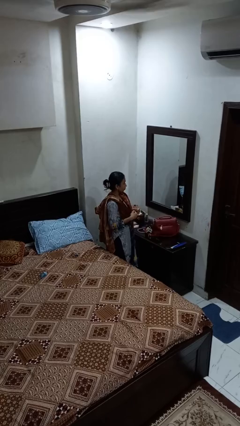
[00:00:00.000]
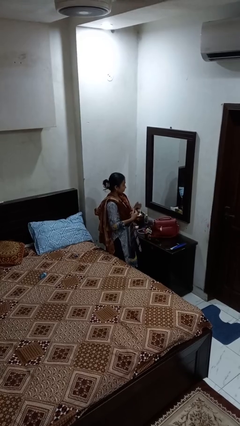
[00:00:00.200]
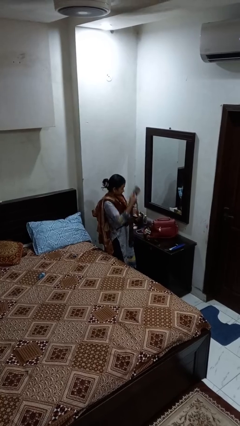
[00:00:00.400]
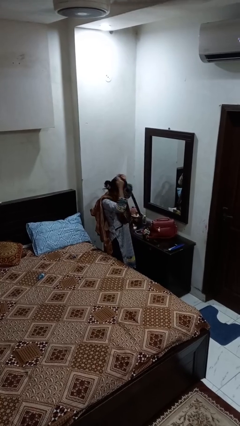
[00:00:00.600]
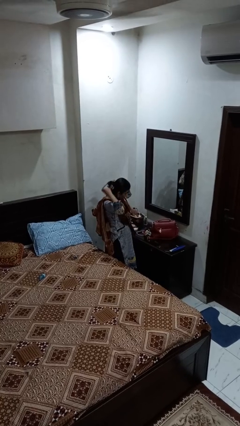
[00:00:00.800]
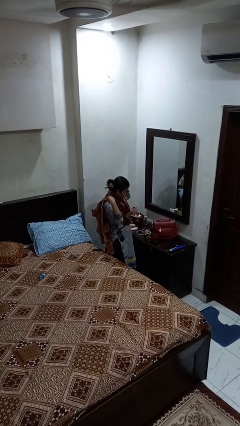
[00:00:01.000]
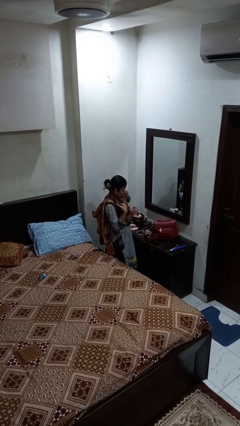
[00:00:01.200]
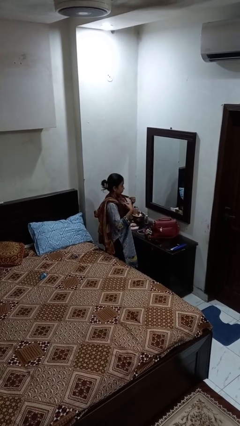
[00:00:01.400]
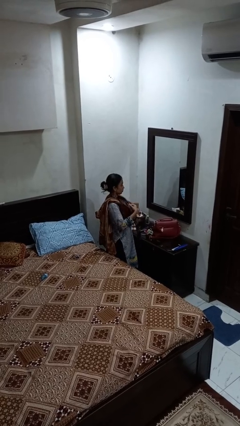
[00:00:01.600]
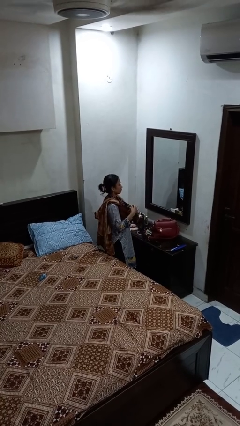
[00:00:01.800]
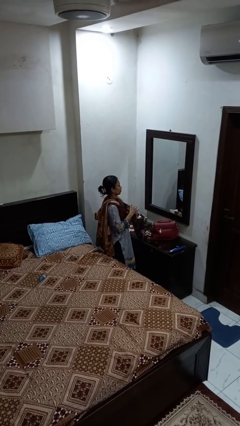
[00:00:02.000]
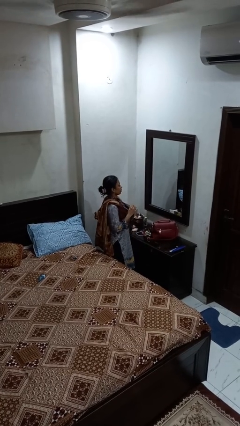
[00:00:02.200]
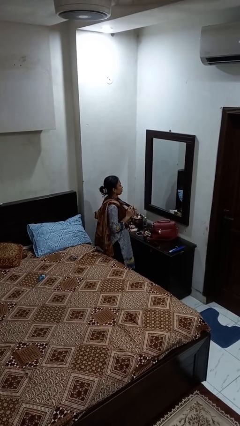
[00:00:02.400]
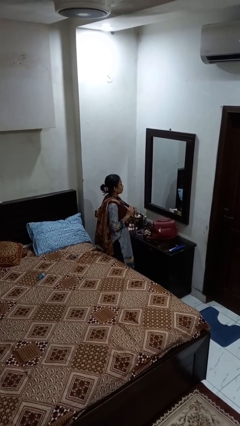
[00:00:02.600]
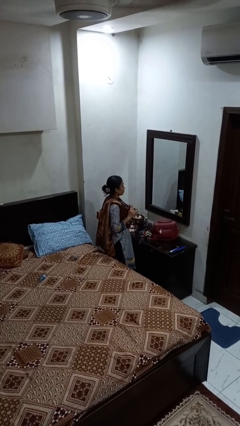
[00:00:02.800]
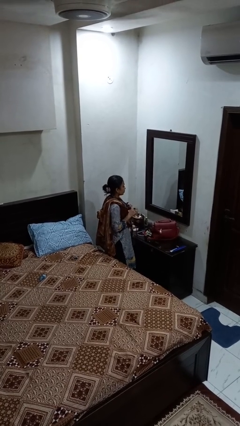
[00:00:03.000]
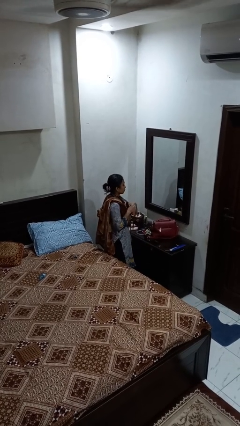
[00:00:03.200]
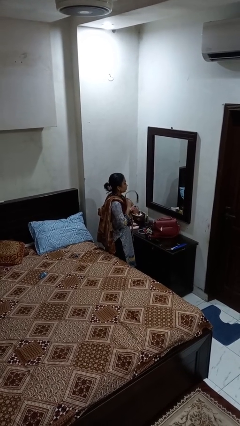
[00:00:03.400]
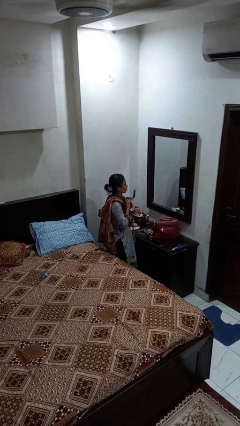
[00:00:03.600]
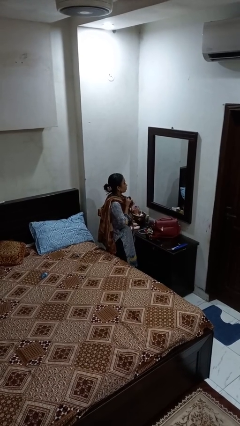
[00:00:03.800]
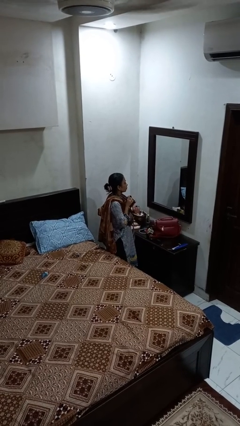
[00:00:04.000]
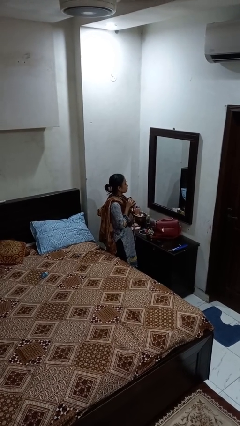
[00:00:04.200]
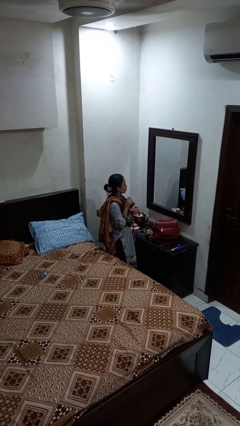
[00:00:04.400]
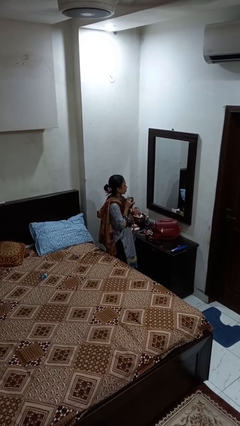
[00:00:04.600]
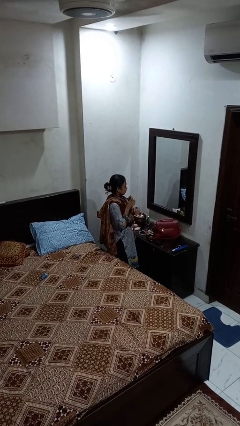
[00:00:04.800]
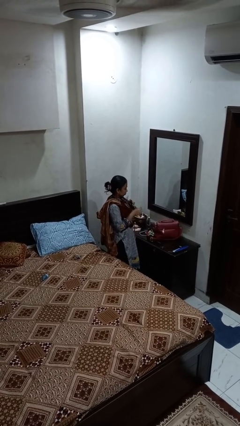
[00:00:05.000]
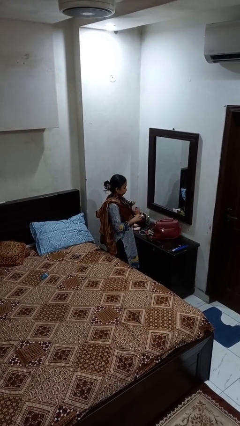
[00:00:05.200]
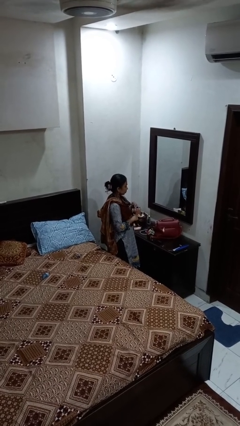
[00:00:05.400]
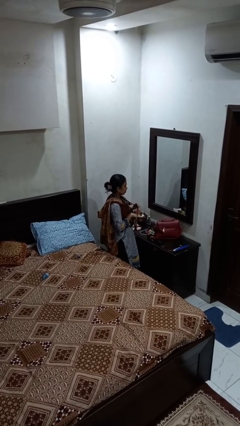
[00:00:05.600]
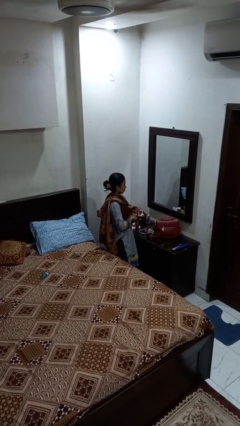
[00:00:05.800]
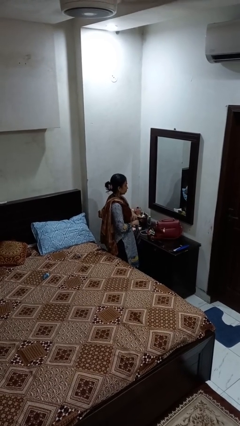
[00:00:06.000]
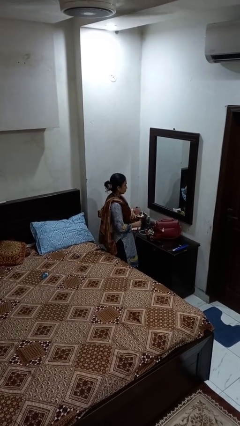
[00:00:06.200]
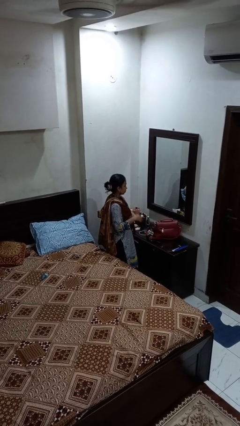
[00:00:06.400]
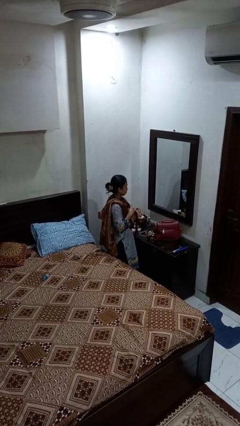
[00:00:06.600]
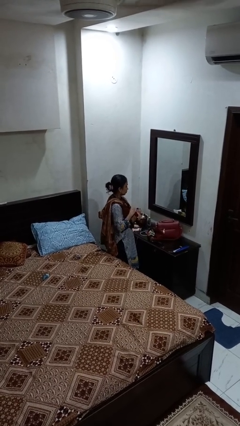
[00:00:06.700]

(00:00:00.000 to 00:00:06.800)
person puts on necktie

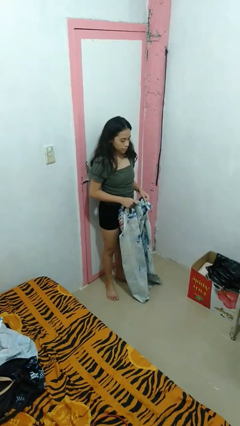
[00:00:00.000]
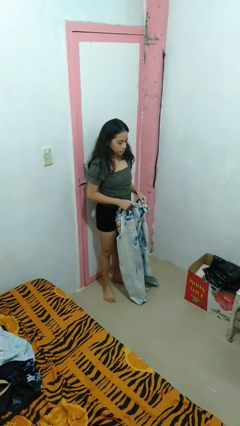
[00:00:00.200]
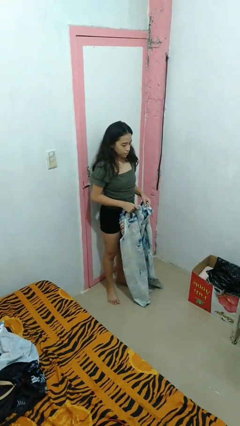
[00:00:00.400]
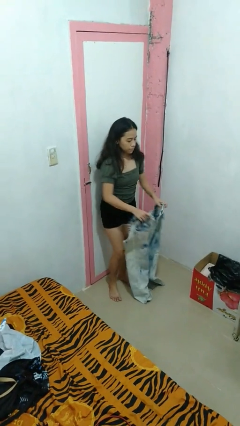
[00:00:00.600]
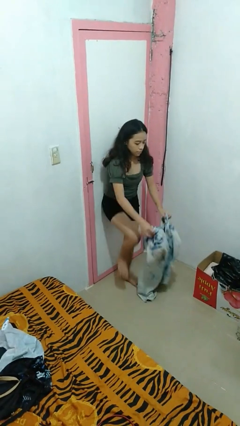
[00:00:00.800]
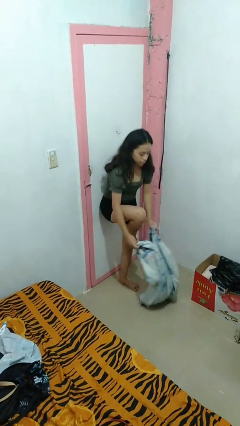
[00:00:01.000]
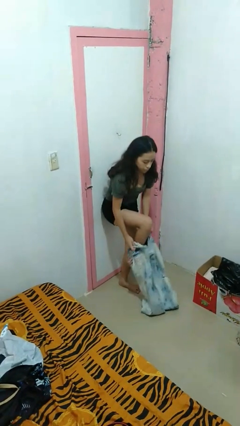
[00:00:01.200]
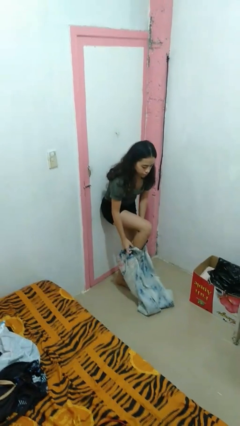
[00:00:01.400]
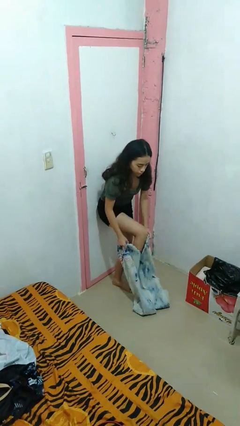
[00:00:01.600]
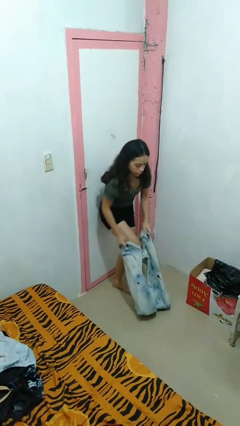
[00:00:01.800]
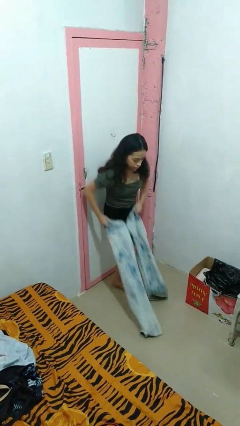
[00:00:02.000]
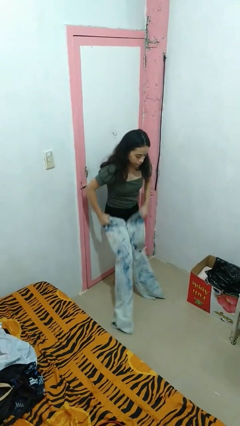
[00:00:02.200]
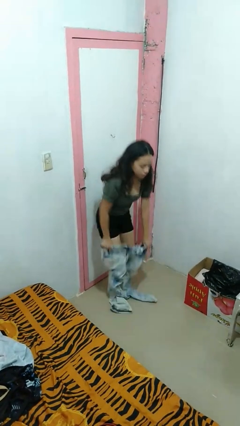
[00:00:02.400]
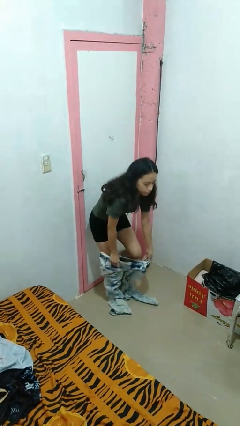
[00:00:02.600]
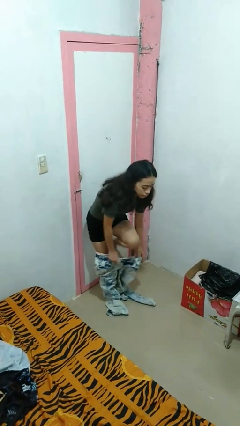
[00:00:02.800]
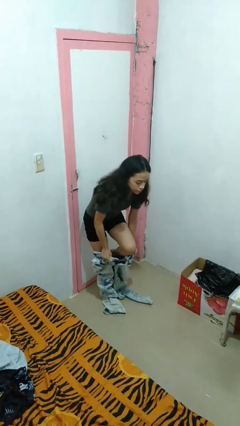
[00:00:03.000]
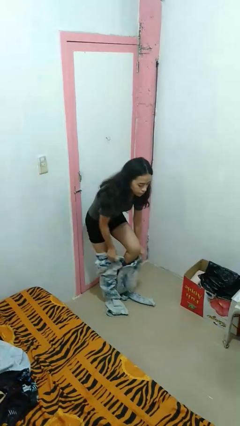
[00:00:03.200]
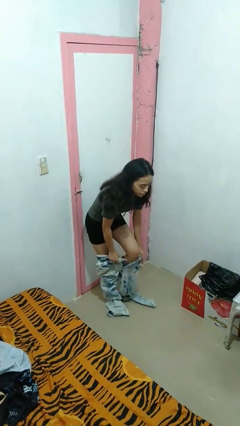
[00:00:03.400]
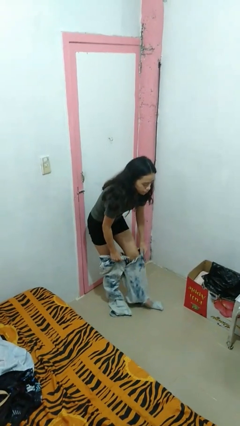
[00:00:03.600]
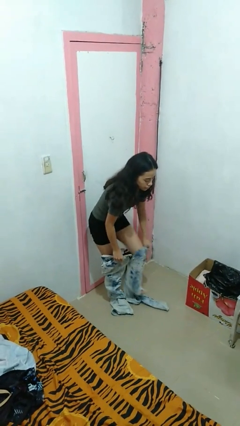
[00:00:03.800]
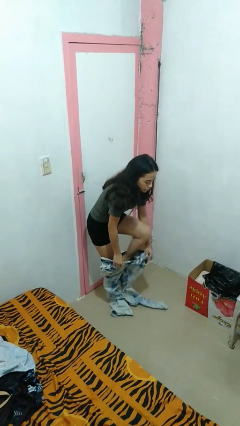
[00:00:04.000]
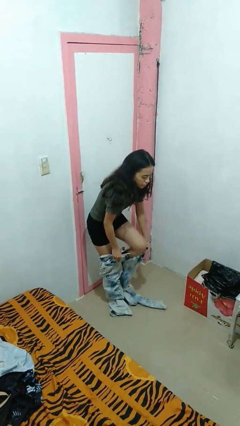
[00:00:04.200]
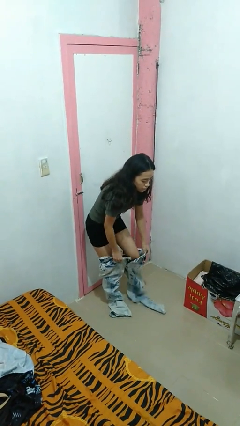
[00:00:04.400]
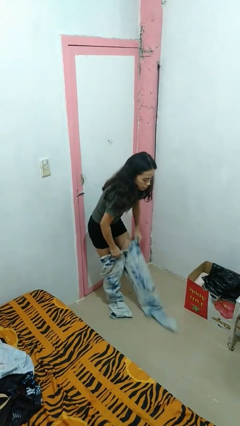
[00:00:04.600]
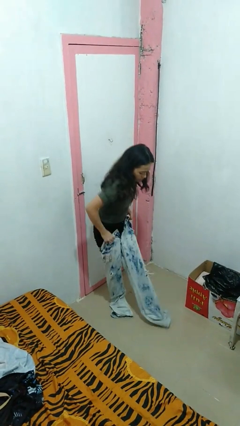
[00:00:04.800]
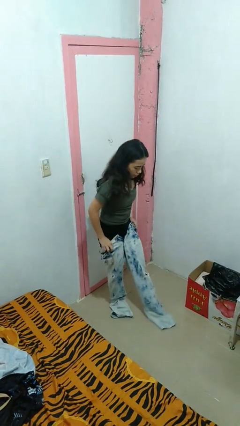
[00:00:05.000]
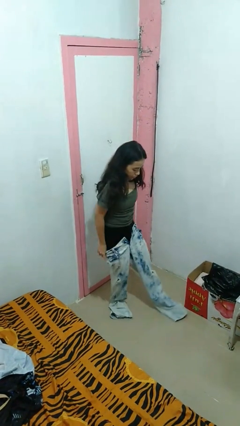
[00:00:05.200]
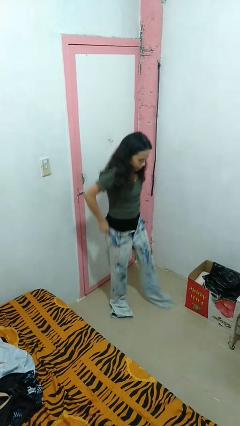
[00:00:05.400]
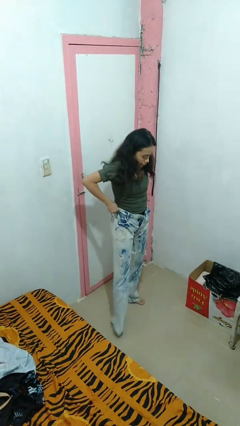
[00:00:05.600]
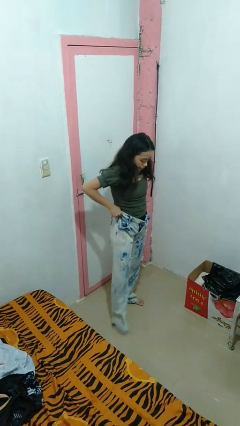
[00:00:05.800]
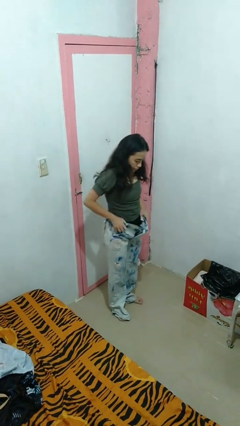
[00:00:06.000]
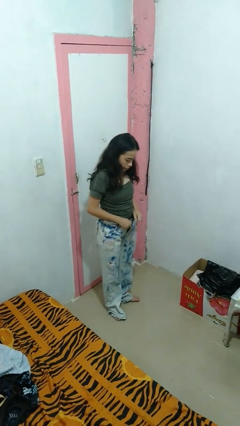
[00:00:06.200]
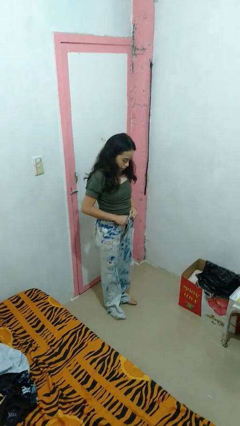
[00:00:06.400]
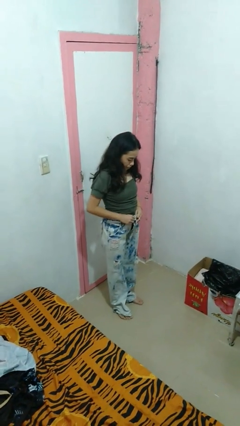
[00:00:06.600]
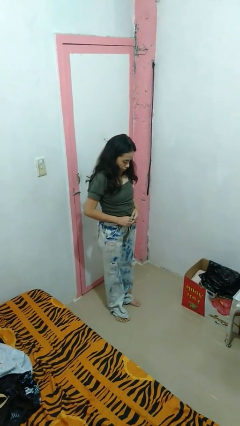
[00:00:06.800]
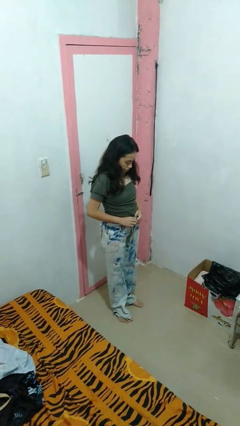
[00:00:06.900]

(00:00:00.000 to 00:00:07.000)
person puts on pants

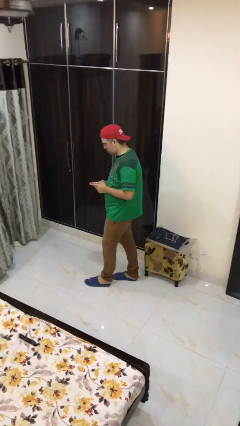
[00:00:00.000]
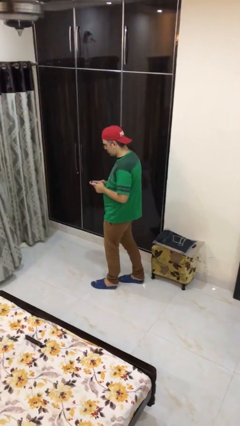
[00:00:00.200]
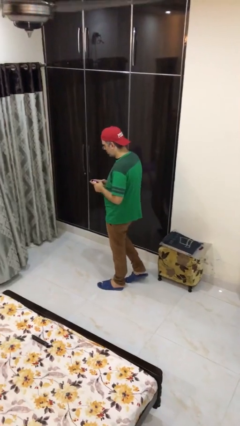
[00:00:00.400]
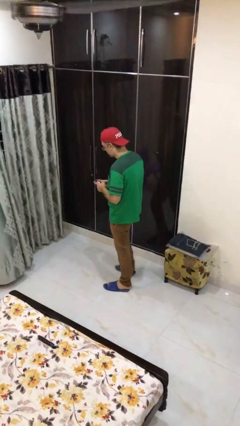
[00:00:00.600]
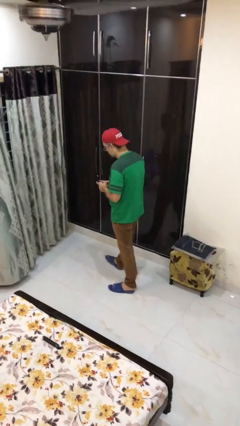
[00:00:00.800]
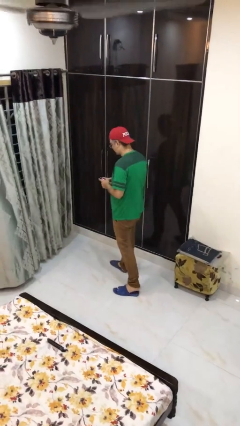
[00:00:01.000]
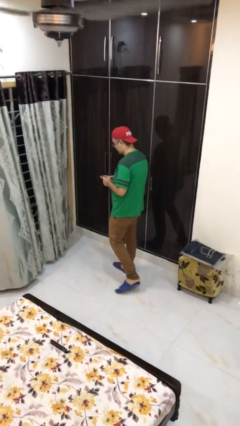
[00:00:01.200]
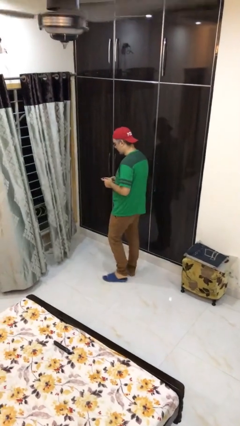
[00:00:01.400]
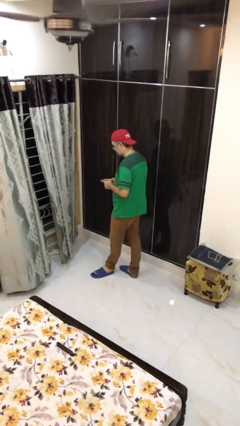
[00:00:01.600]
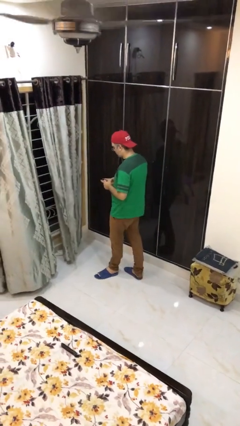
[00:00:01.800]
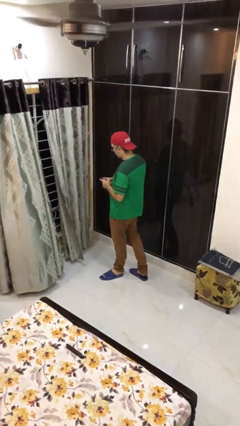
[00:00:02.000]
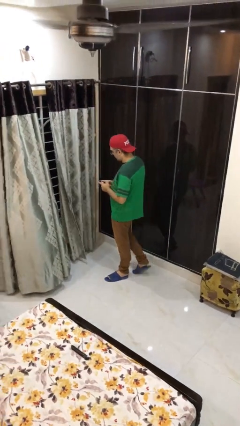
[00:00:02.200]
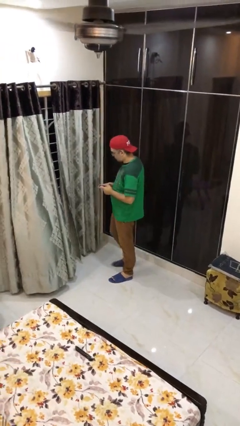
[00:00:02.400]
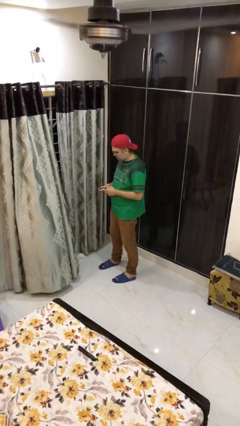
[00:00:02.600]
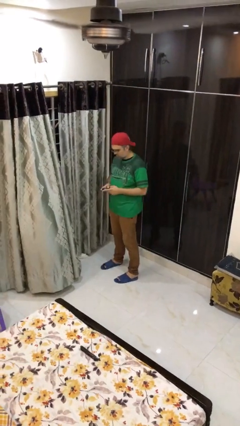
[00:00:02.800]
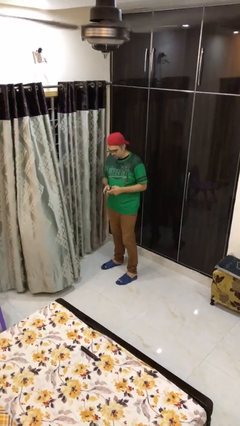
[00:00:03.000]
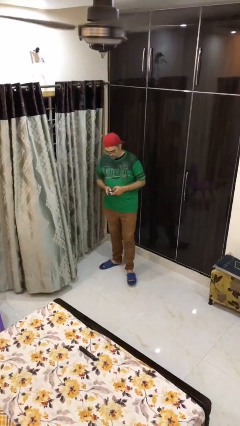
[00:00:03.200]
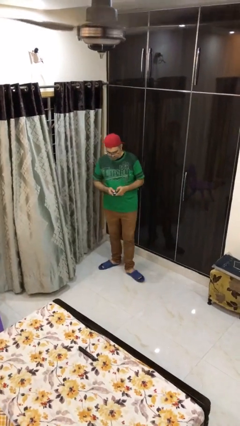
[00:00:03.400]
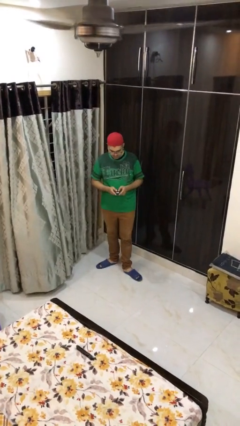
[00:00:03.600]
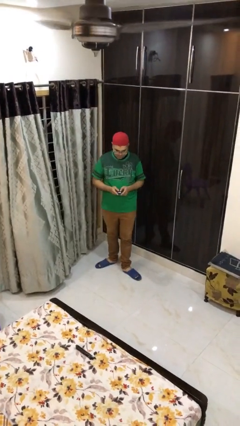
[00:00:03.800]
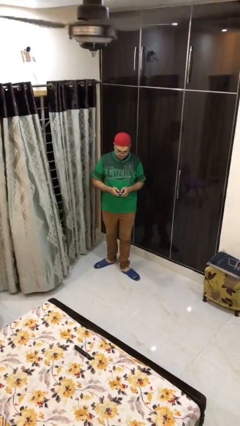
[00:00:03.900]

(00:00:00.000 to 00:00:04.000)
person texts on phone

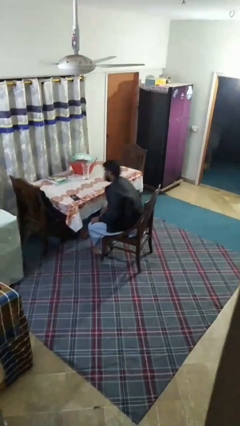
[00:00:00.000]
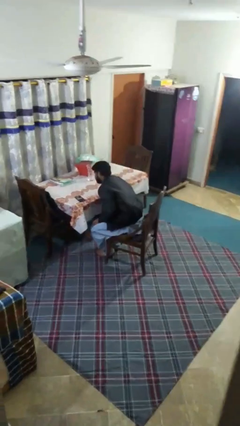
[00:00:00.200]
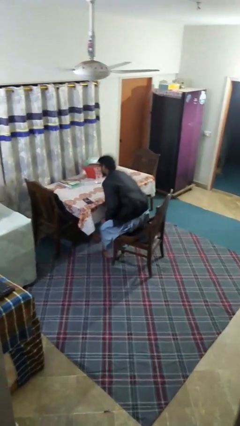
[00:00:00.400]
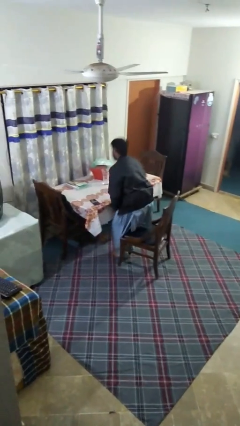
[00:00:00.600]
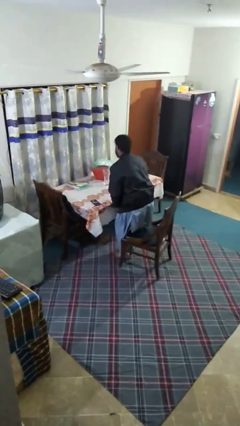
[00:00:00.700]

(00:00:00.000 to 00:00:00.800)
person stands up
